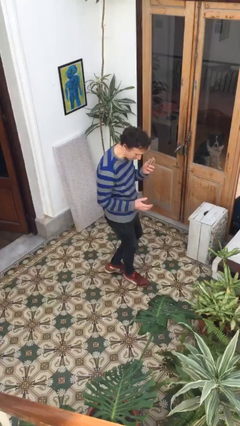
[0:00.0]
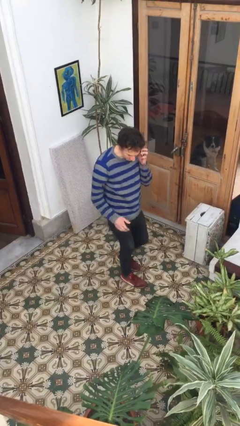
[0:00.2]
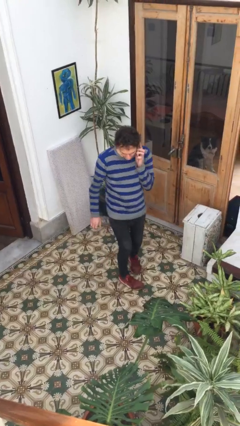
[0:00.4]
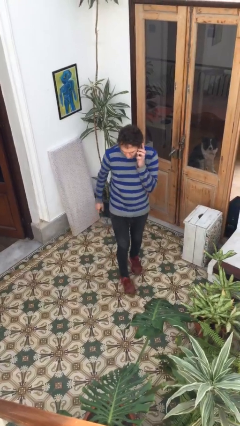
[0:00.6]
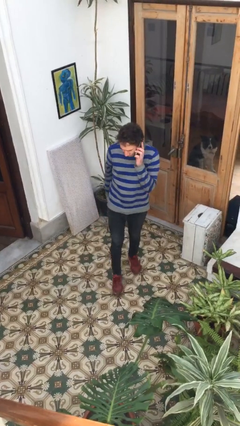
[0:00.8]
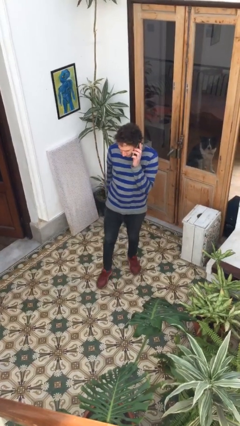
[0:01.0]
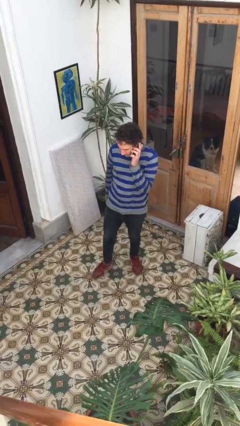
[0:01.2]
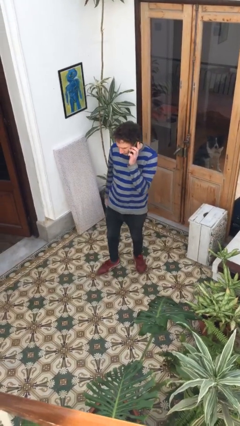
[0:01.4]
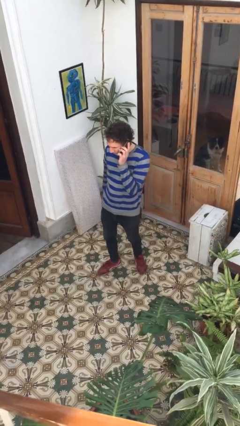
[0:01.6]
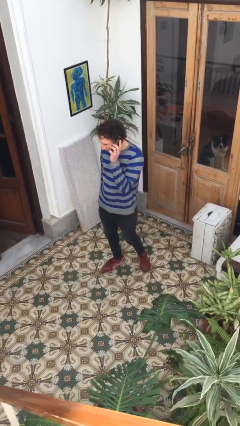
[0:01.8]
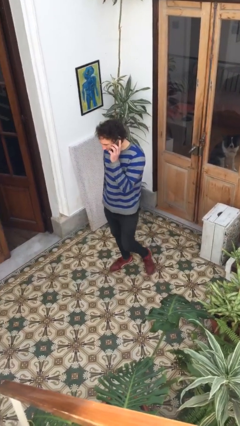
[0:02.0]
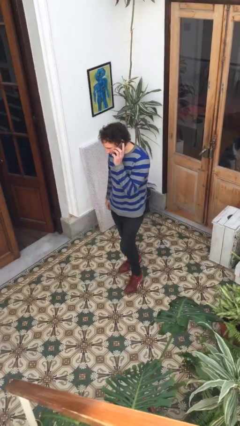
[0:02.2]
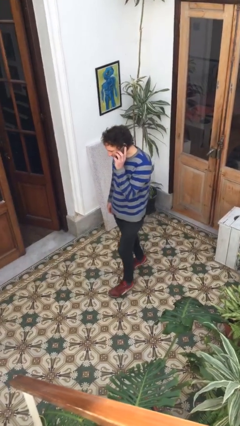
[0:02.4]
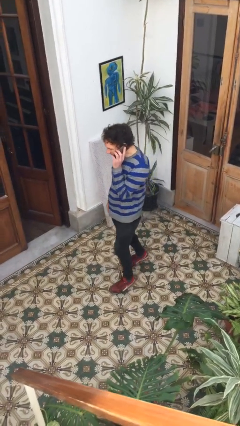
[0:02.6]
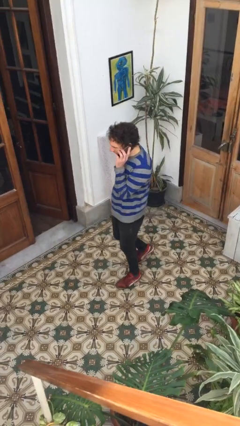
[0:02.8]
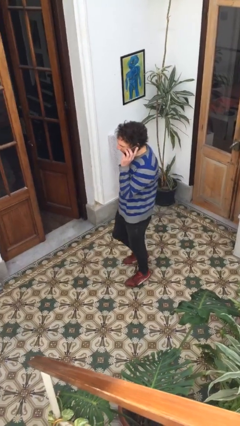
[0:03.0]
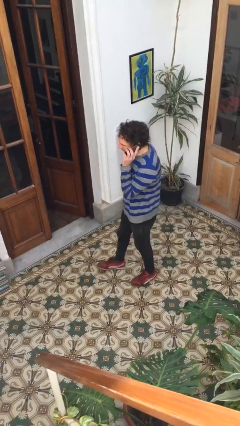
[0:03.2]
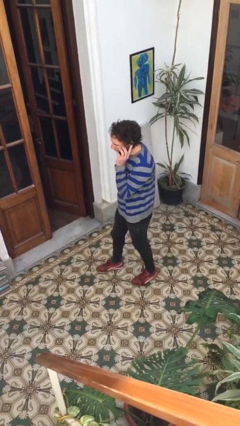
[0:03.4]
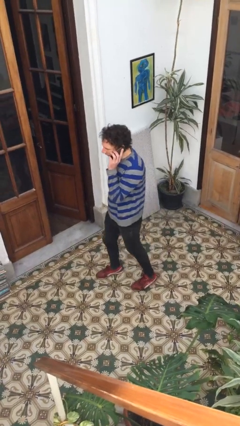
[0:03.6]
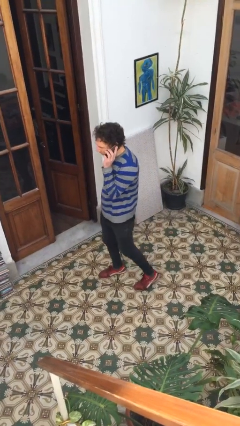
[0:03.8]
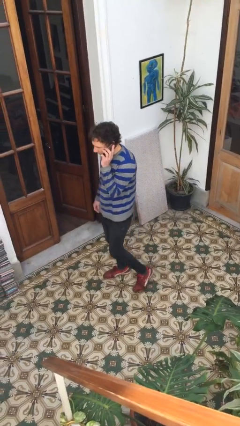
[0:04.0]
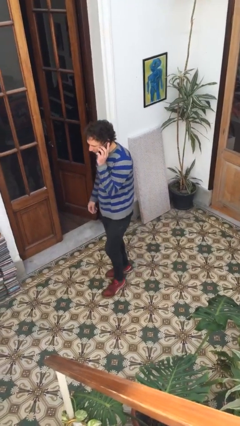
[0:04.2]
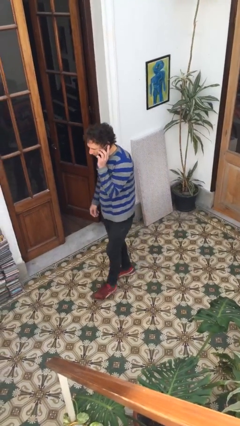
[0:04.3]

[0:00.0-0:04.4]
person talks on phone

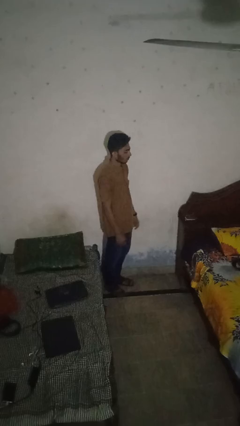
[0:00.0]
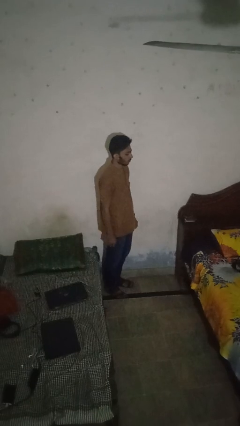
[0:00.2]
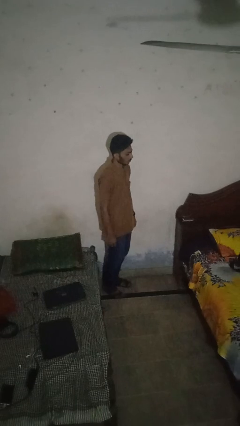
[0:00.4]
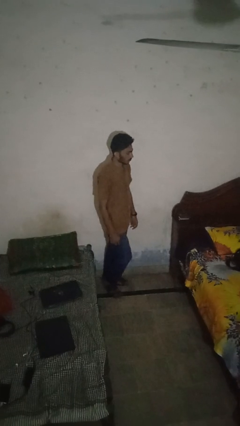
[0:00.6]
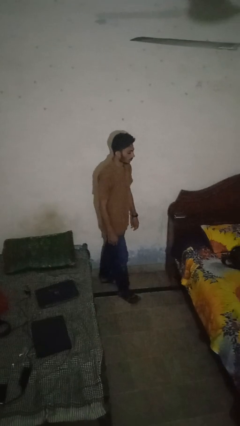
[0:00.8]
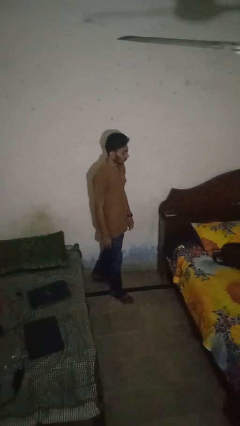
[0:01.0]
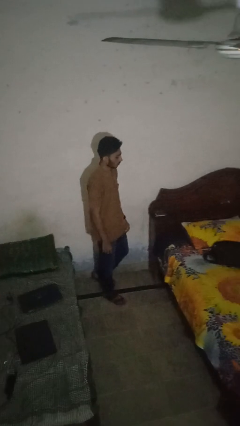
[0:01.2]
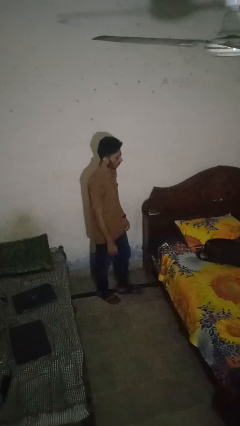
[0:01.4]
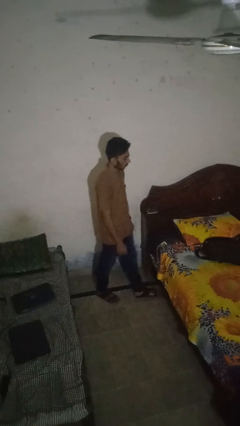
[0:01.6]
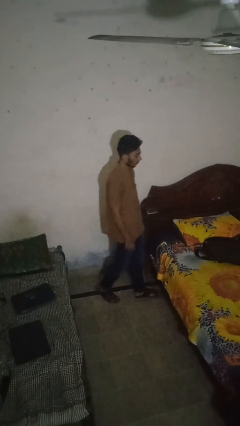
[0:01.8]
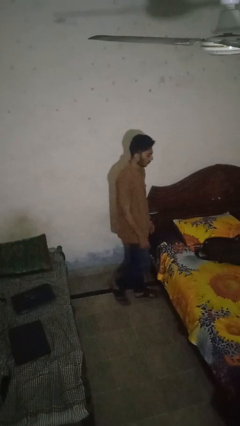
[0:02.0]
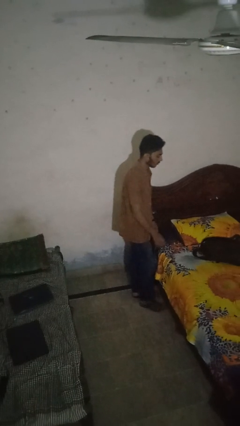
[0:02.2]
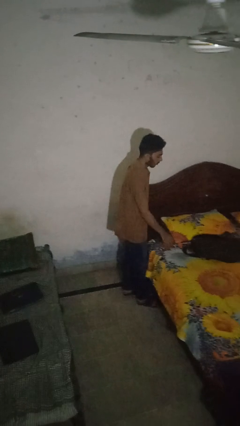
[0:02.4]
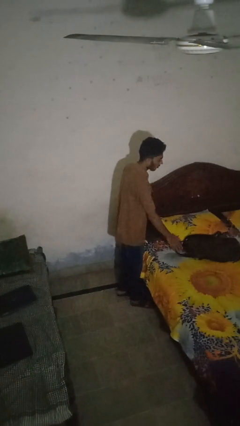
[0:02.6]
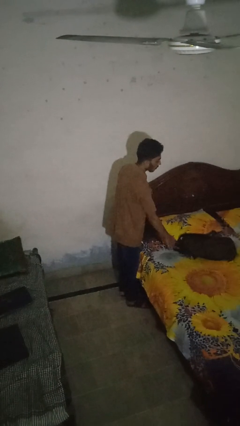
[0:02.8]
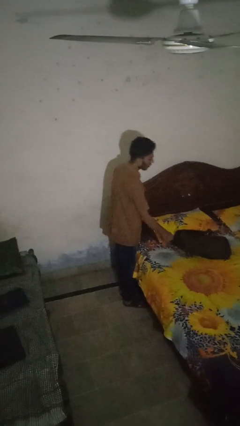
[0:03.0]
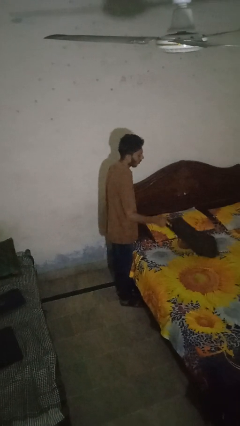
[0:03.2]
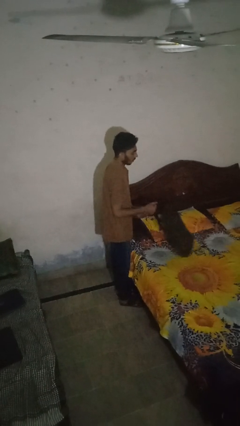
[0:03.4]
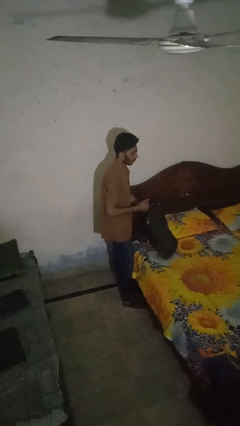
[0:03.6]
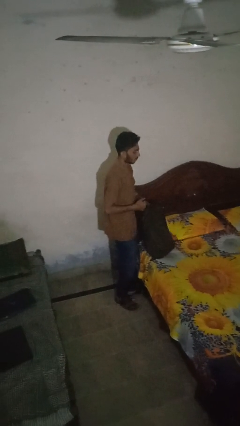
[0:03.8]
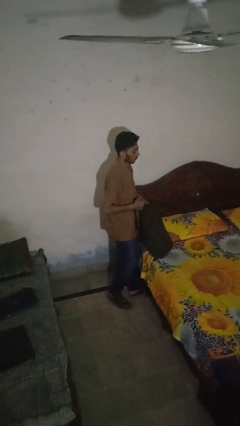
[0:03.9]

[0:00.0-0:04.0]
person picks up object from bed

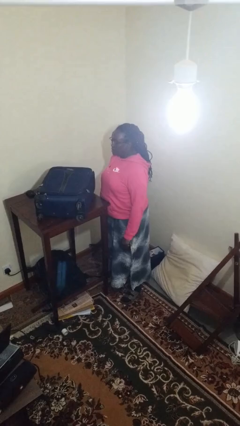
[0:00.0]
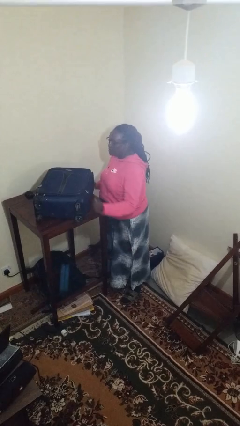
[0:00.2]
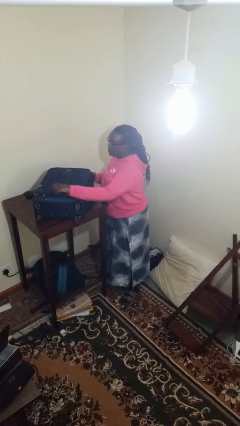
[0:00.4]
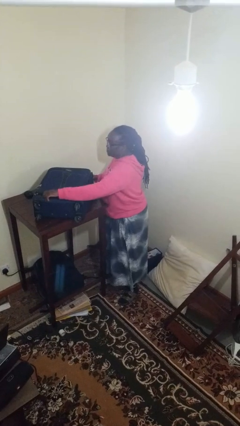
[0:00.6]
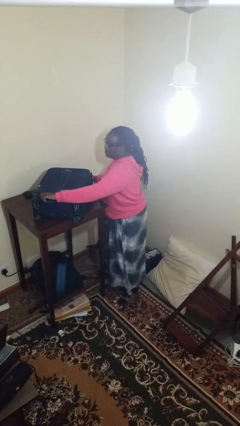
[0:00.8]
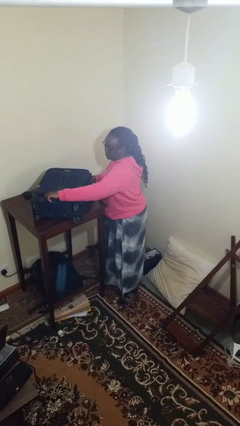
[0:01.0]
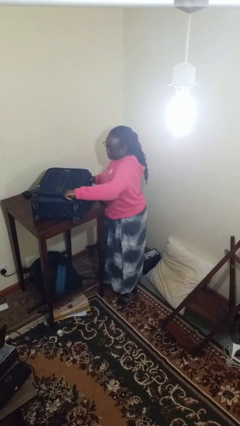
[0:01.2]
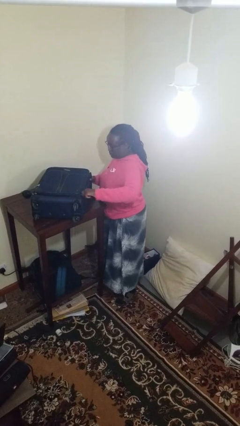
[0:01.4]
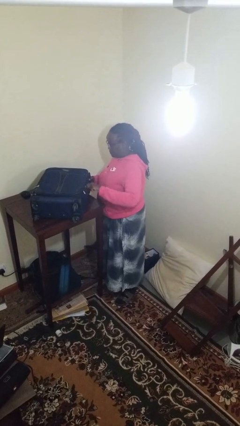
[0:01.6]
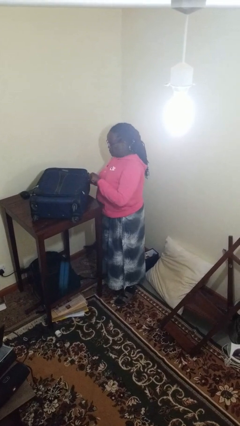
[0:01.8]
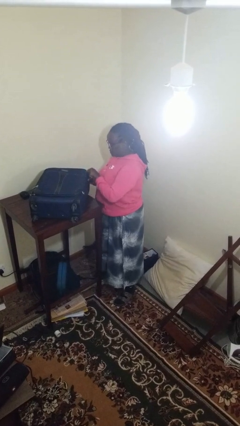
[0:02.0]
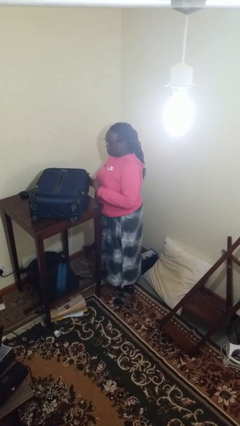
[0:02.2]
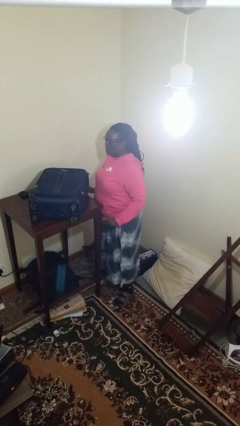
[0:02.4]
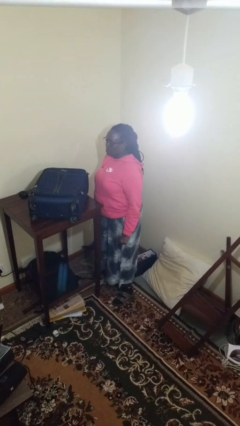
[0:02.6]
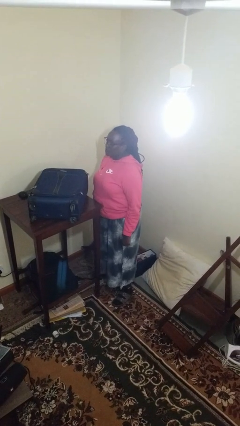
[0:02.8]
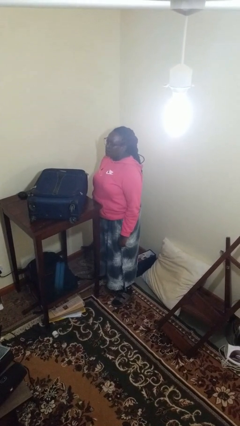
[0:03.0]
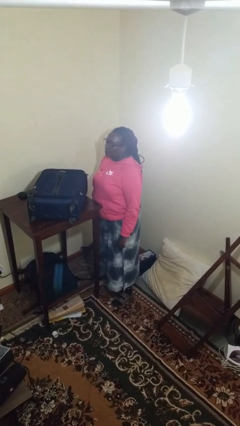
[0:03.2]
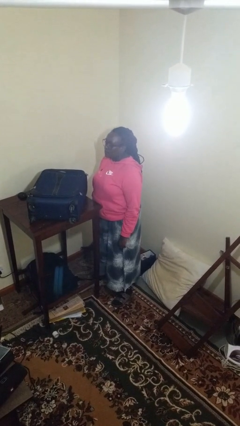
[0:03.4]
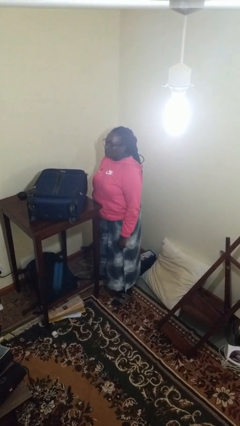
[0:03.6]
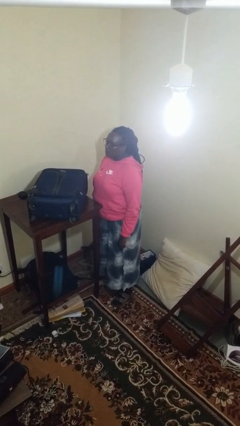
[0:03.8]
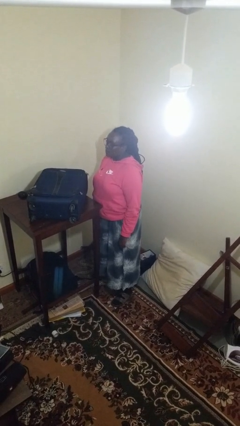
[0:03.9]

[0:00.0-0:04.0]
person opens suitcase

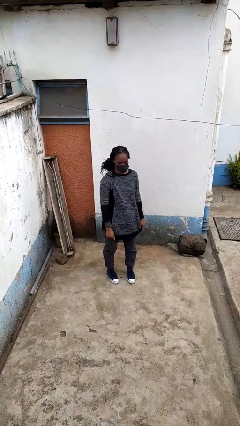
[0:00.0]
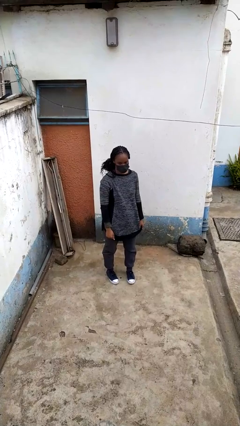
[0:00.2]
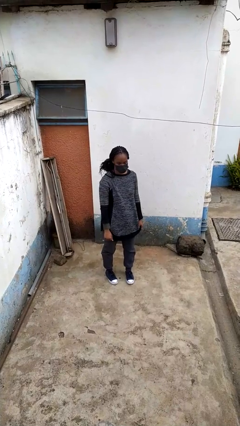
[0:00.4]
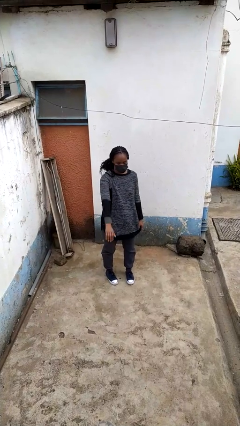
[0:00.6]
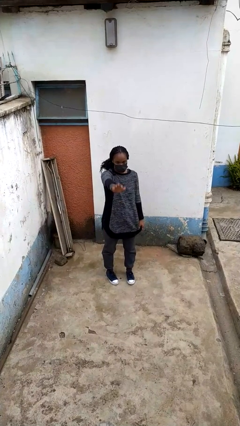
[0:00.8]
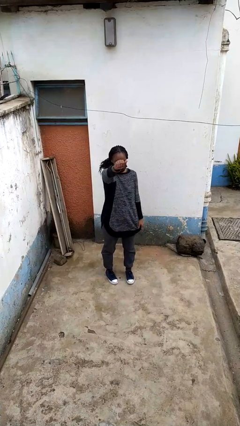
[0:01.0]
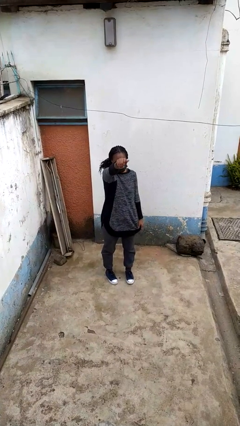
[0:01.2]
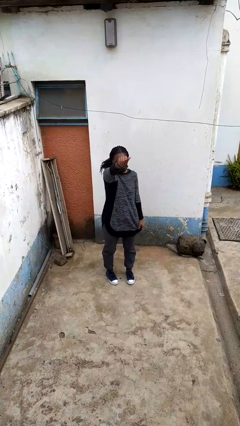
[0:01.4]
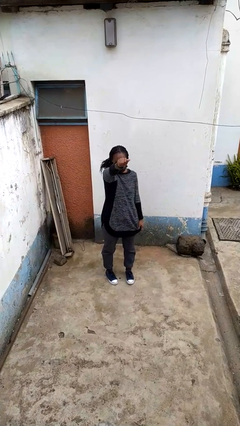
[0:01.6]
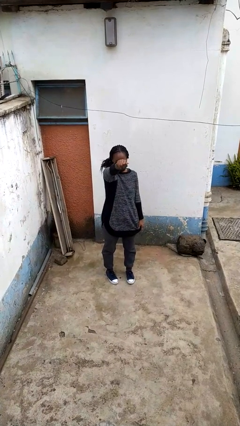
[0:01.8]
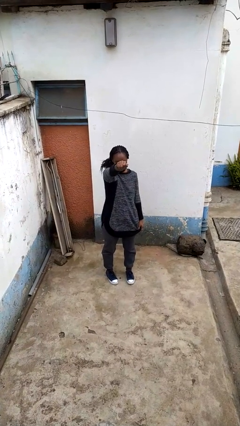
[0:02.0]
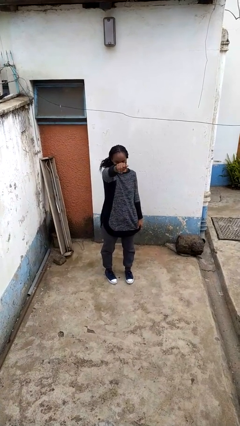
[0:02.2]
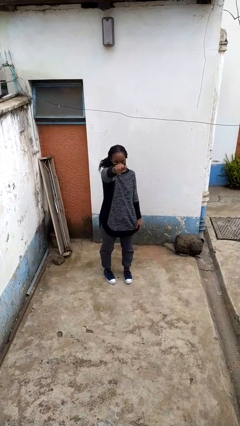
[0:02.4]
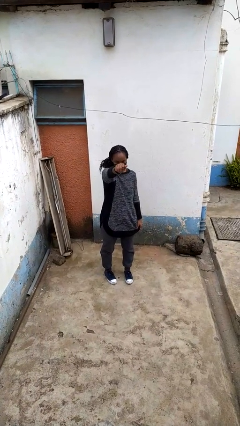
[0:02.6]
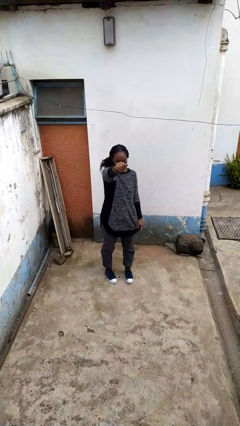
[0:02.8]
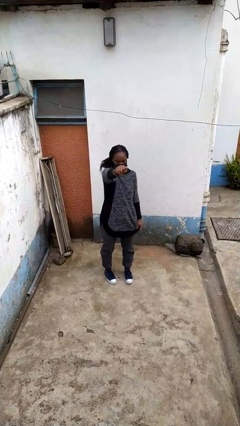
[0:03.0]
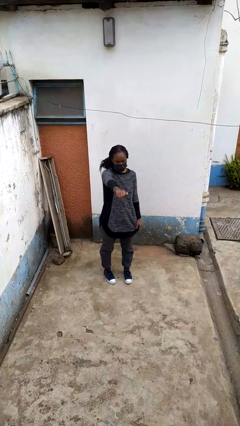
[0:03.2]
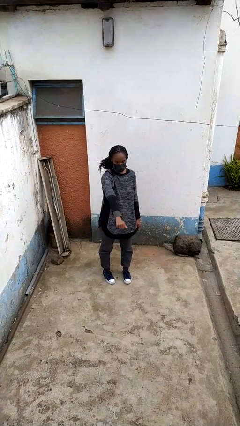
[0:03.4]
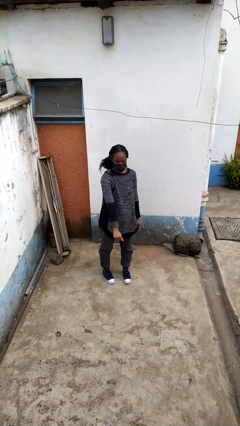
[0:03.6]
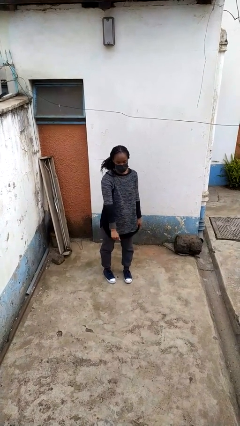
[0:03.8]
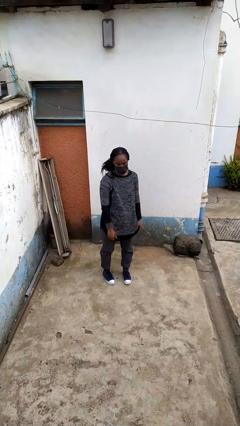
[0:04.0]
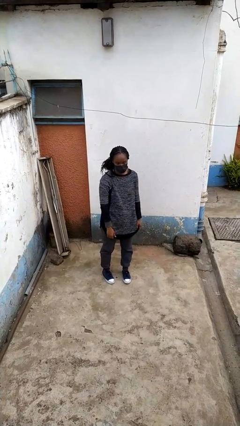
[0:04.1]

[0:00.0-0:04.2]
person gestures come here

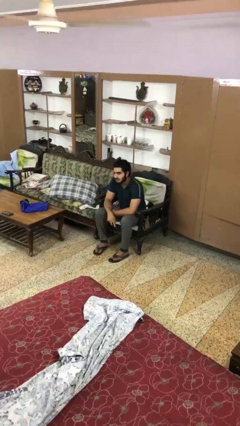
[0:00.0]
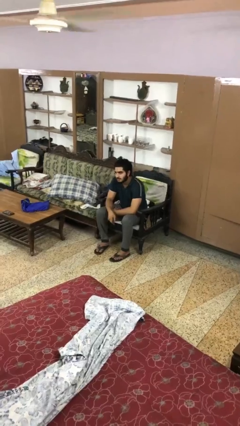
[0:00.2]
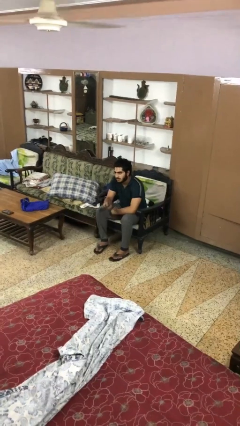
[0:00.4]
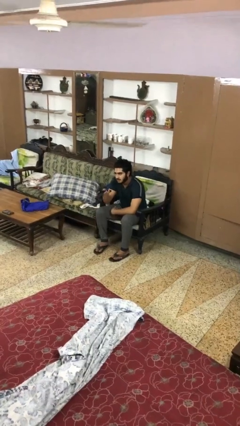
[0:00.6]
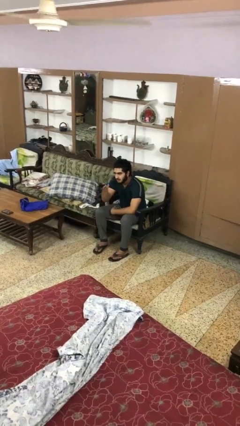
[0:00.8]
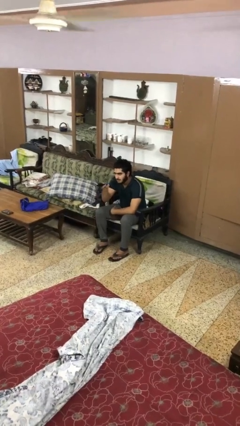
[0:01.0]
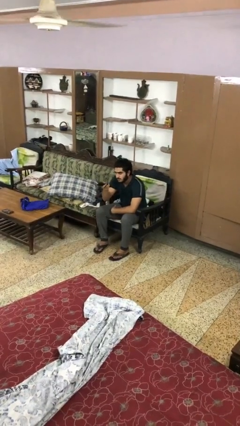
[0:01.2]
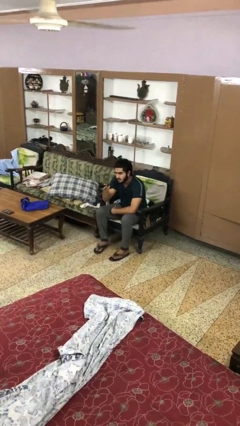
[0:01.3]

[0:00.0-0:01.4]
person uses television remote
